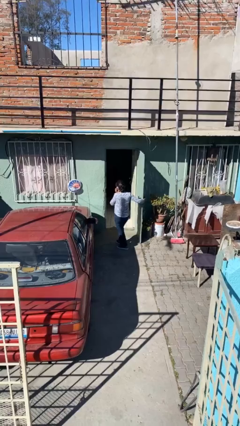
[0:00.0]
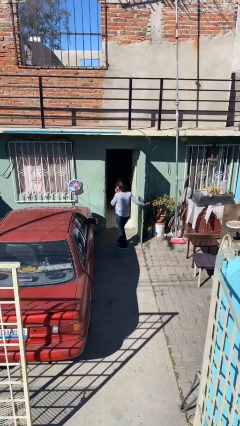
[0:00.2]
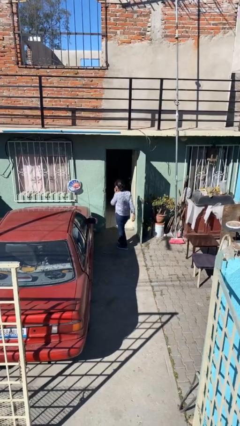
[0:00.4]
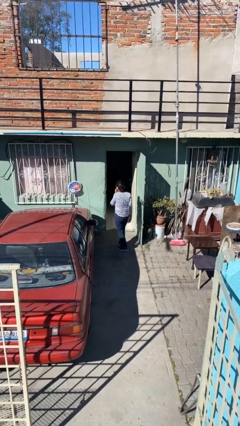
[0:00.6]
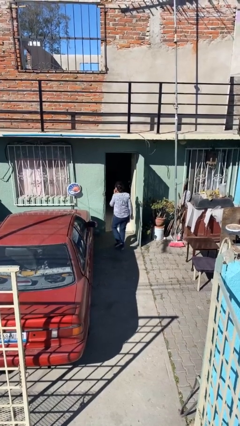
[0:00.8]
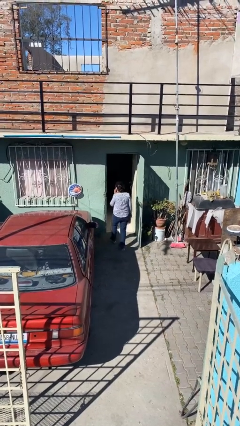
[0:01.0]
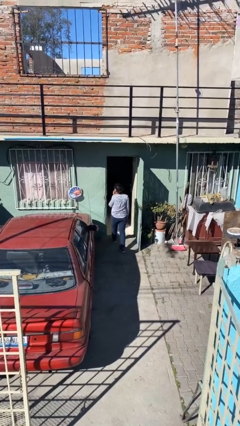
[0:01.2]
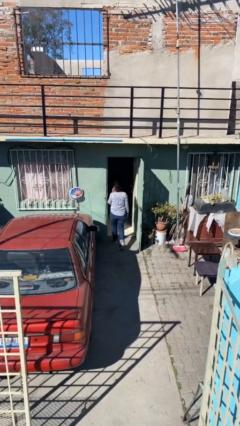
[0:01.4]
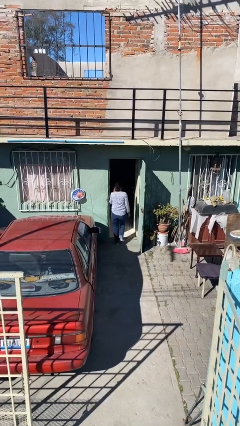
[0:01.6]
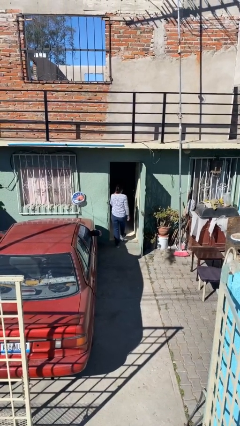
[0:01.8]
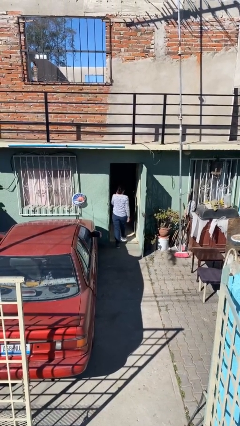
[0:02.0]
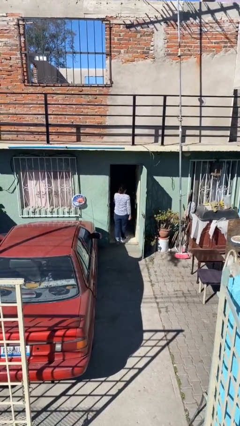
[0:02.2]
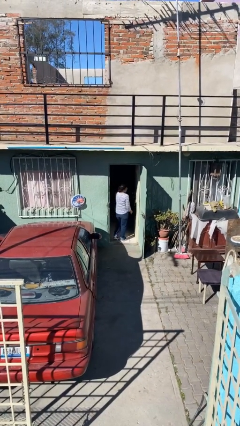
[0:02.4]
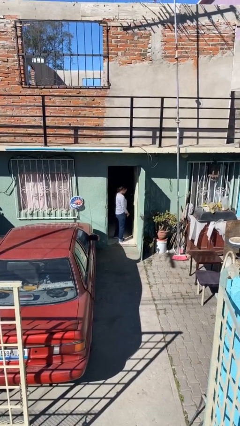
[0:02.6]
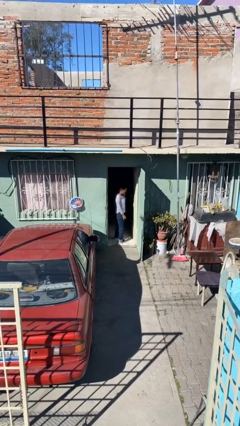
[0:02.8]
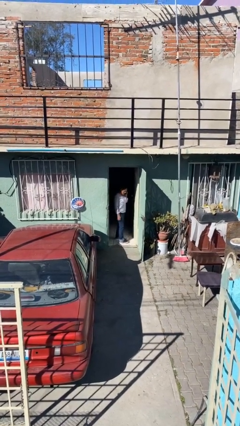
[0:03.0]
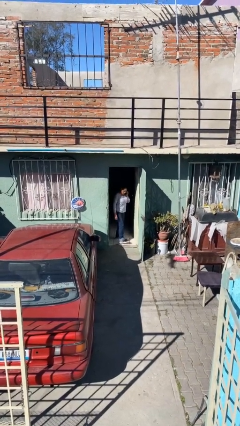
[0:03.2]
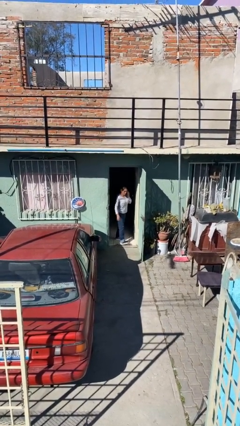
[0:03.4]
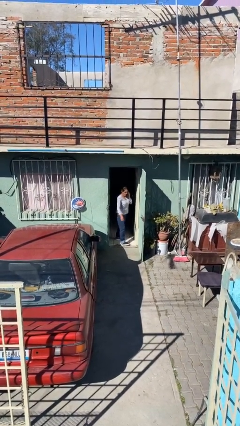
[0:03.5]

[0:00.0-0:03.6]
person exits scene through structure

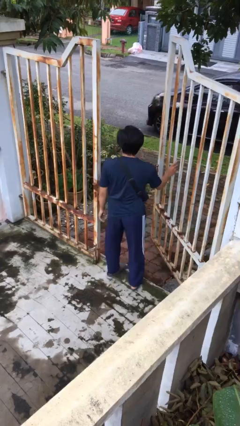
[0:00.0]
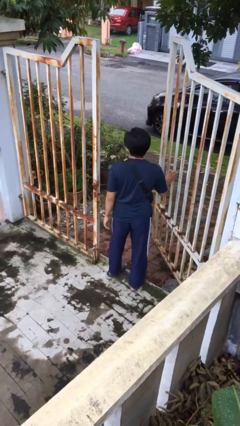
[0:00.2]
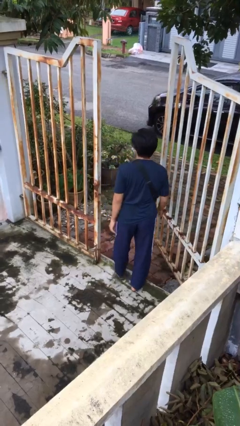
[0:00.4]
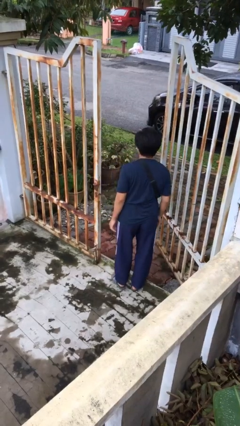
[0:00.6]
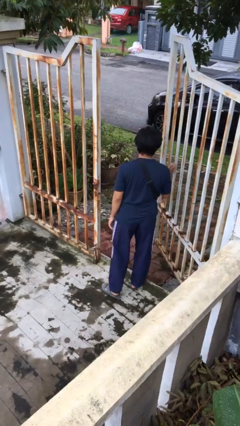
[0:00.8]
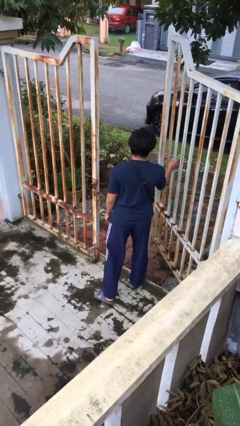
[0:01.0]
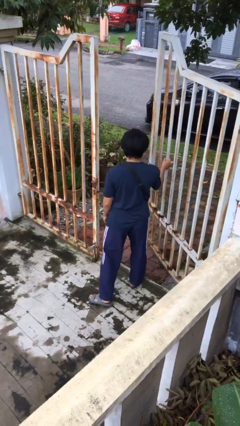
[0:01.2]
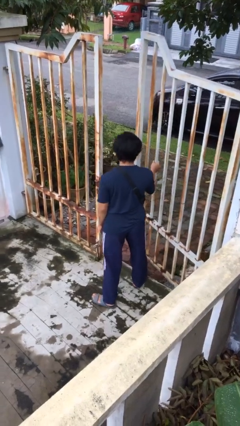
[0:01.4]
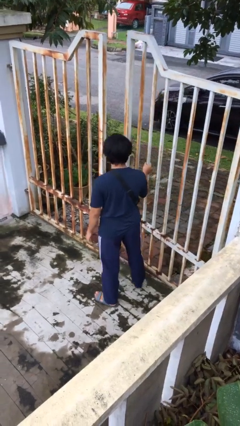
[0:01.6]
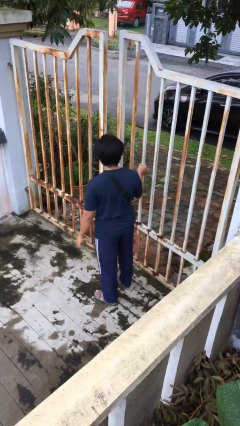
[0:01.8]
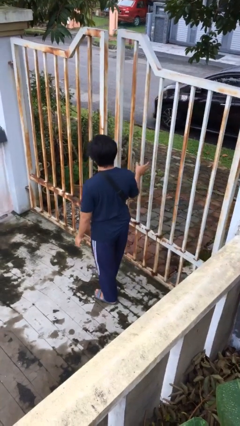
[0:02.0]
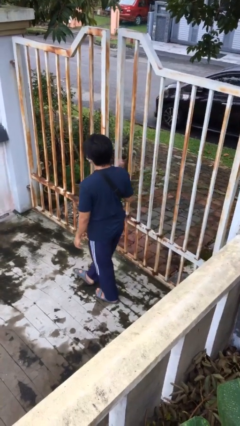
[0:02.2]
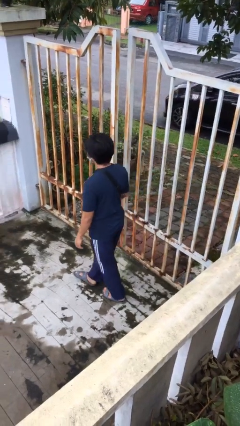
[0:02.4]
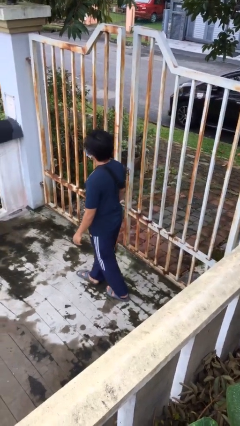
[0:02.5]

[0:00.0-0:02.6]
person closes facility door

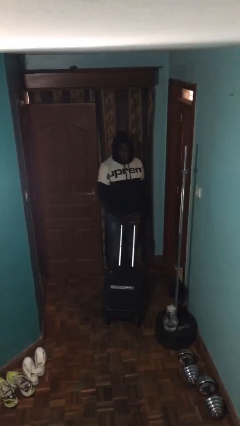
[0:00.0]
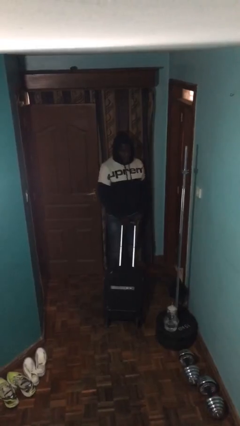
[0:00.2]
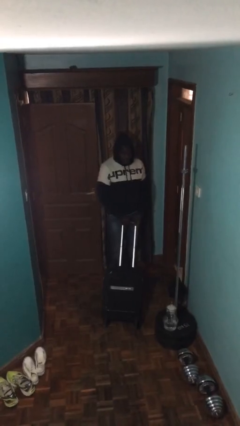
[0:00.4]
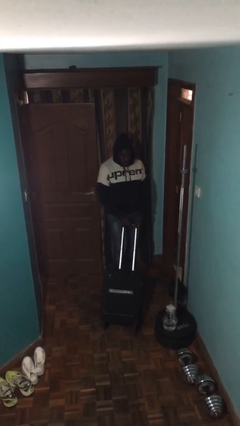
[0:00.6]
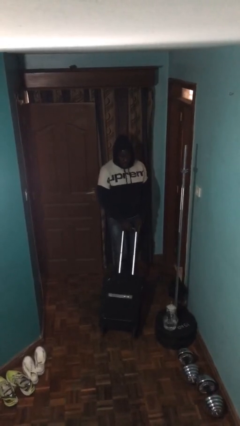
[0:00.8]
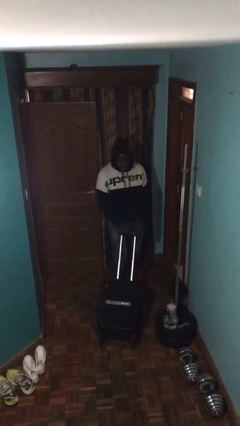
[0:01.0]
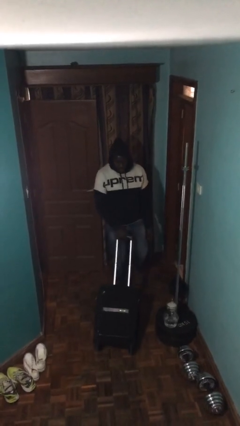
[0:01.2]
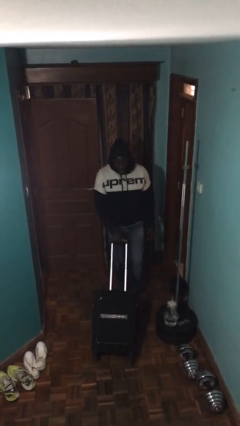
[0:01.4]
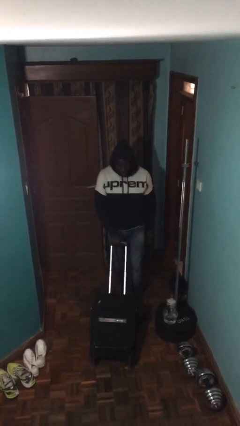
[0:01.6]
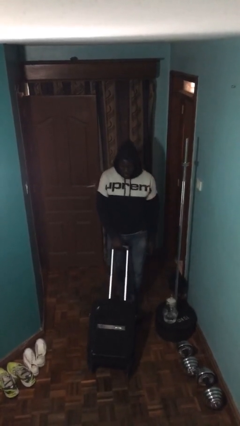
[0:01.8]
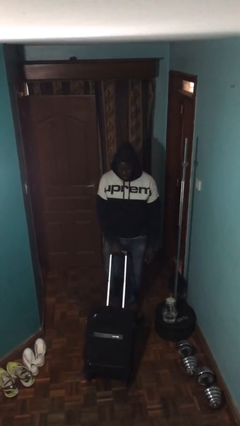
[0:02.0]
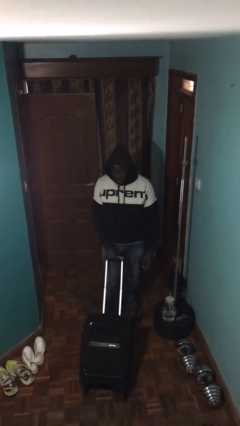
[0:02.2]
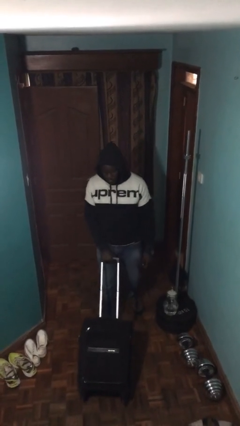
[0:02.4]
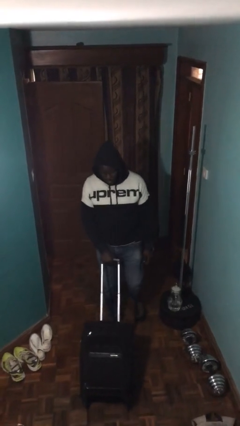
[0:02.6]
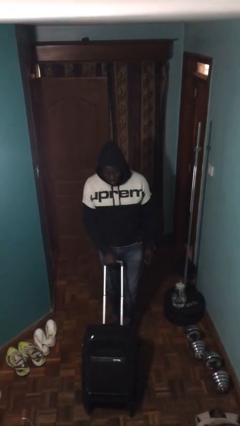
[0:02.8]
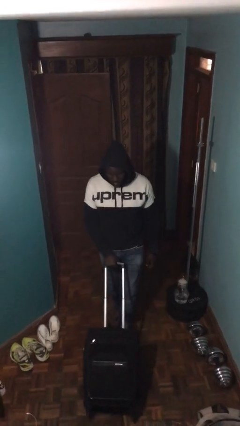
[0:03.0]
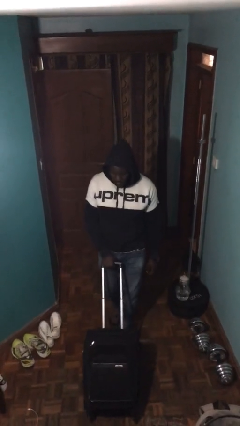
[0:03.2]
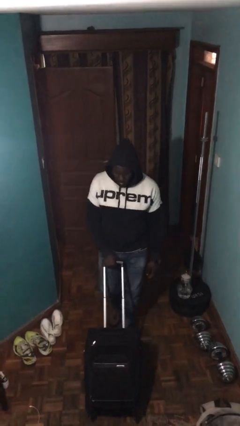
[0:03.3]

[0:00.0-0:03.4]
person pushes wheeled cart

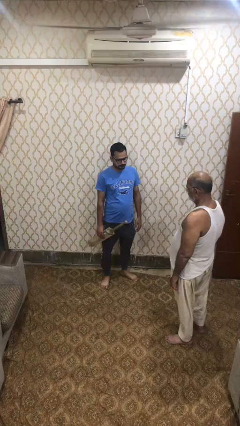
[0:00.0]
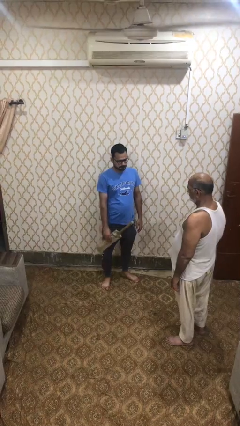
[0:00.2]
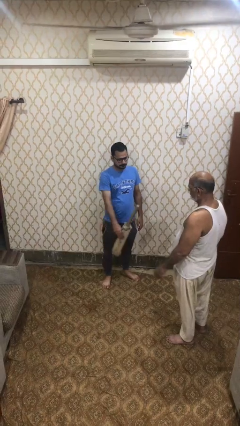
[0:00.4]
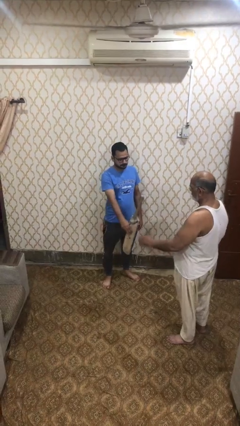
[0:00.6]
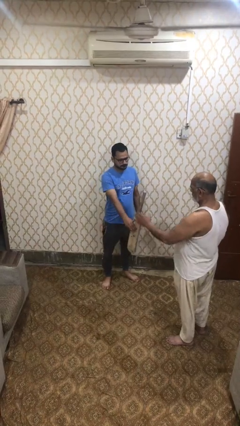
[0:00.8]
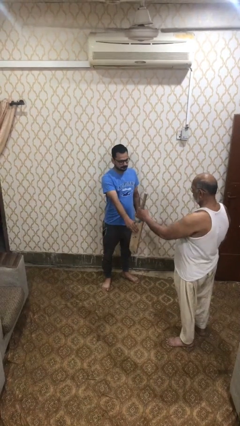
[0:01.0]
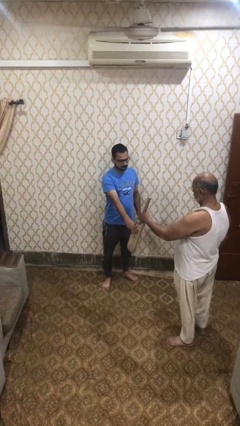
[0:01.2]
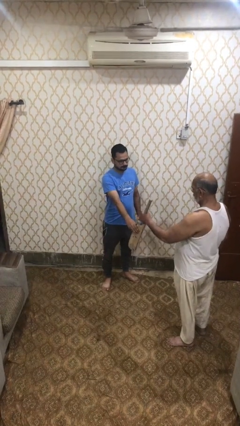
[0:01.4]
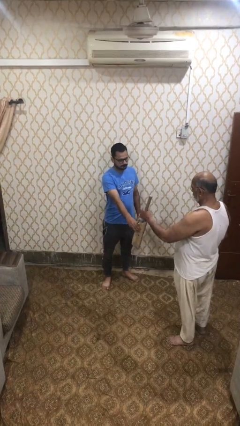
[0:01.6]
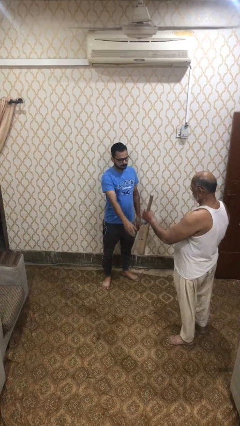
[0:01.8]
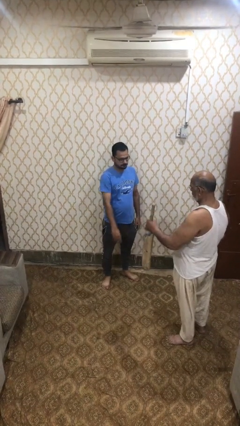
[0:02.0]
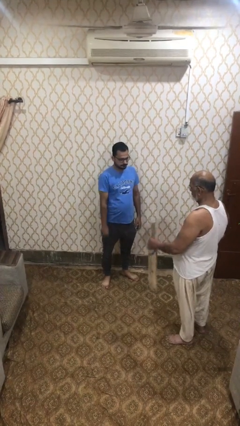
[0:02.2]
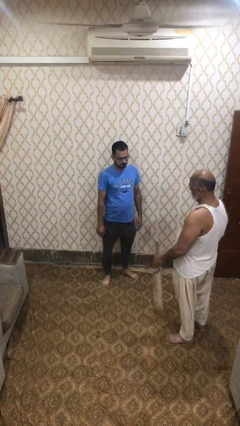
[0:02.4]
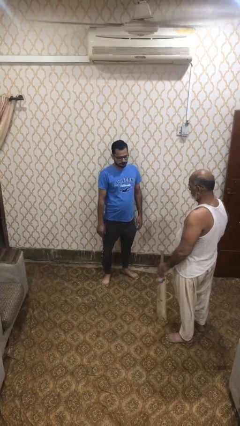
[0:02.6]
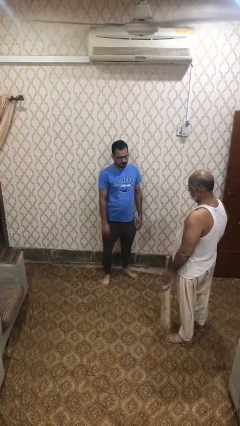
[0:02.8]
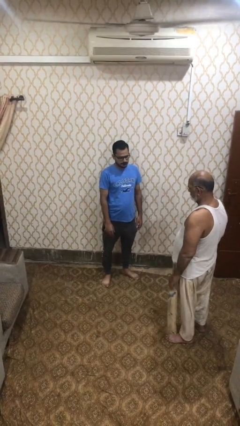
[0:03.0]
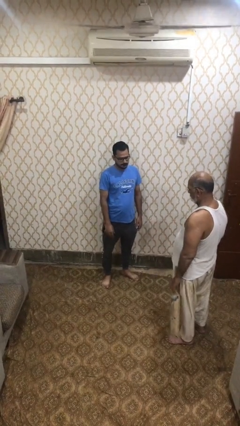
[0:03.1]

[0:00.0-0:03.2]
person transfers object to person

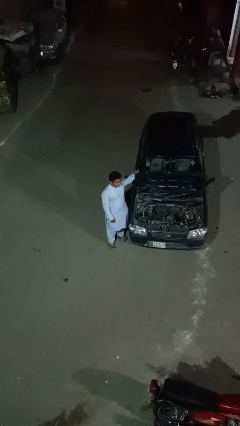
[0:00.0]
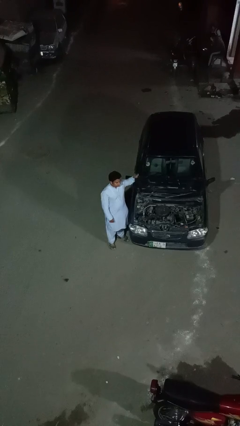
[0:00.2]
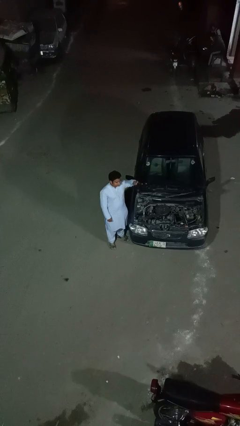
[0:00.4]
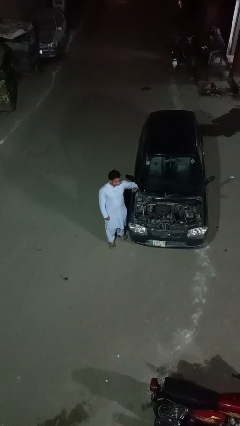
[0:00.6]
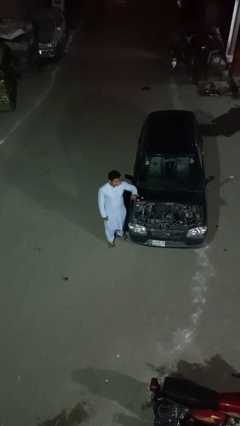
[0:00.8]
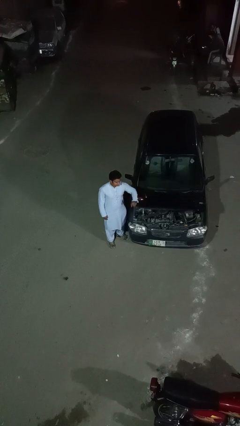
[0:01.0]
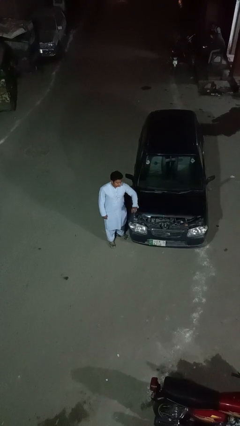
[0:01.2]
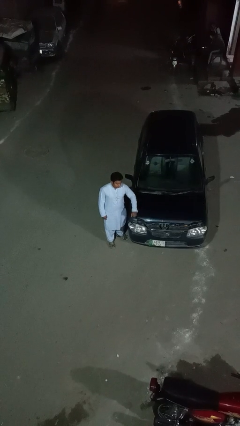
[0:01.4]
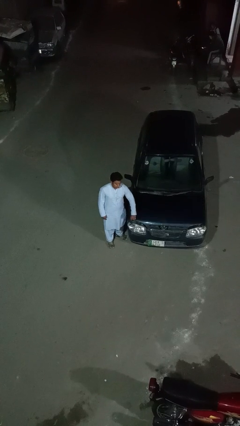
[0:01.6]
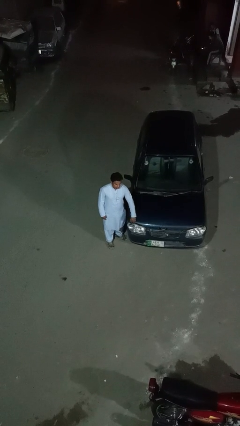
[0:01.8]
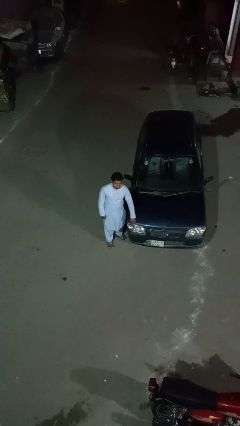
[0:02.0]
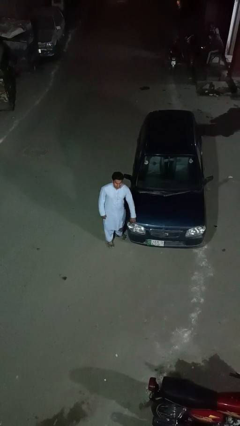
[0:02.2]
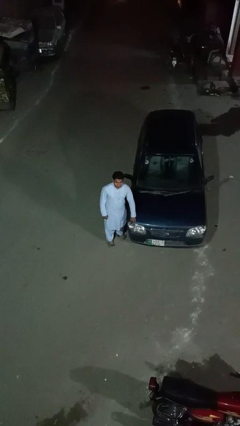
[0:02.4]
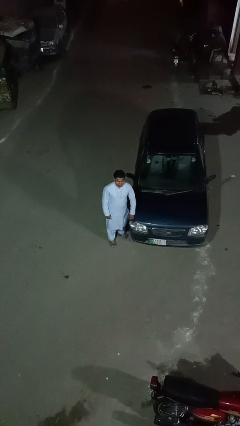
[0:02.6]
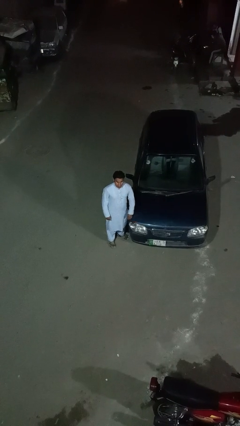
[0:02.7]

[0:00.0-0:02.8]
person closes car hood

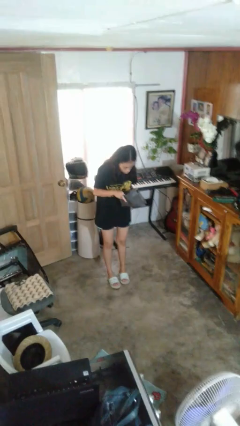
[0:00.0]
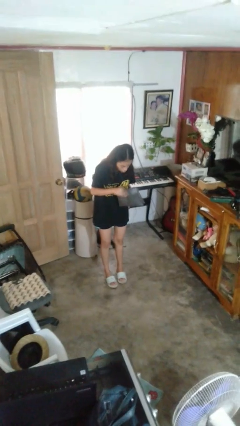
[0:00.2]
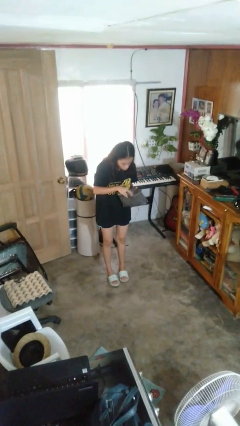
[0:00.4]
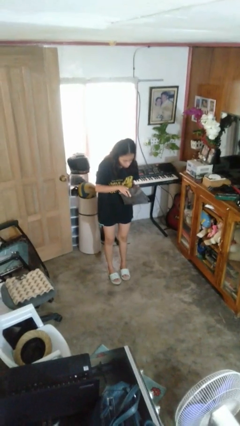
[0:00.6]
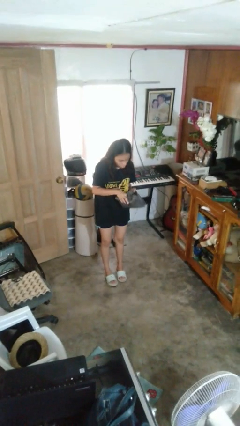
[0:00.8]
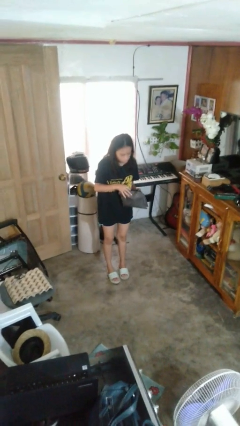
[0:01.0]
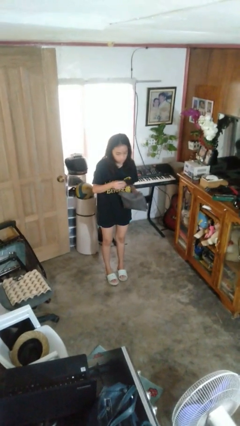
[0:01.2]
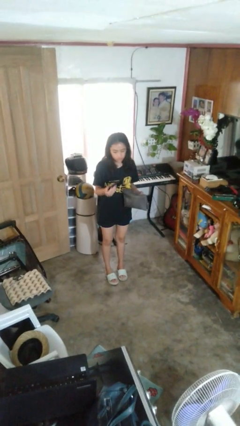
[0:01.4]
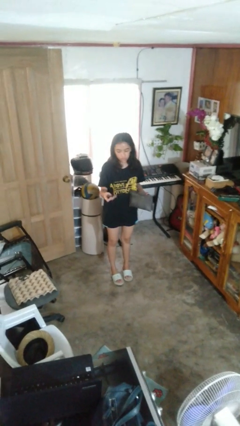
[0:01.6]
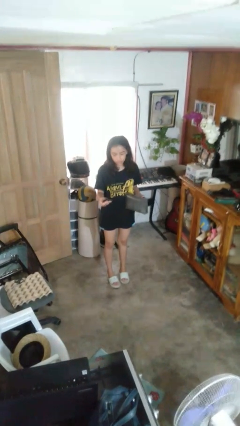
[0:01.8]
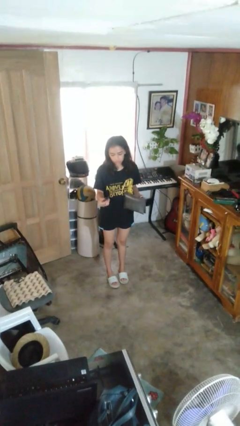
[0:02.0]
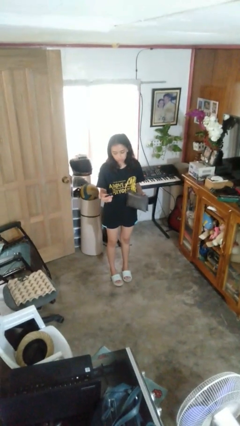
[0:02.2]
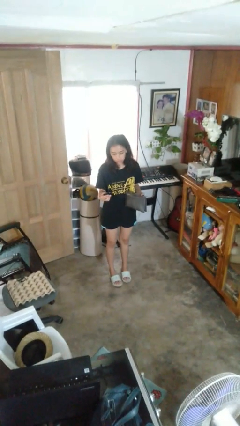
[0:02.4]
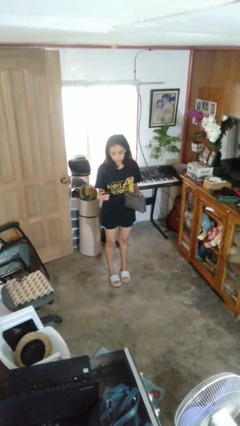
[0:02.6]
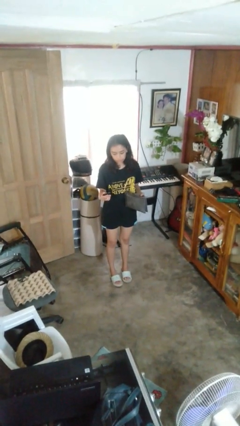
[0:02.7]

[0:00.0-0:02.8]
person takes object from purse
